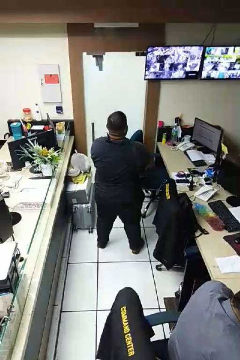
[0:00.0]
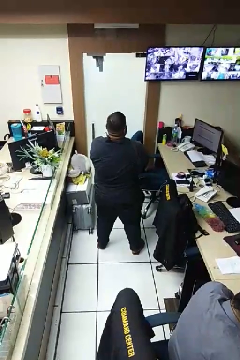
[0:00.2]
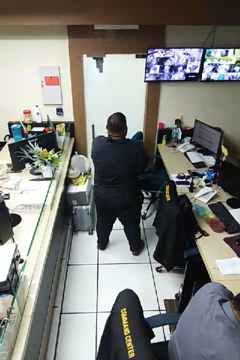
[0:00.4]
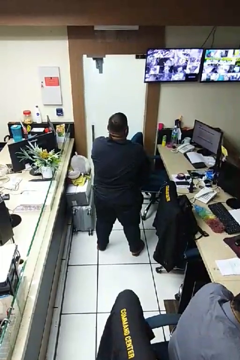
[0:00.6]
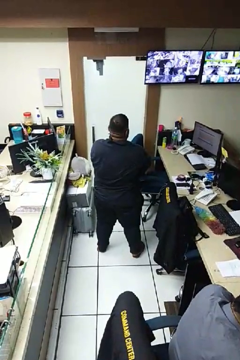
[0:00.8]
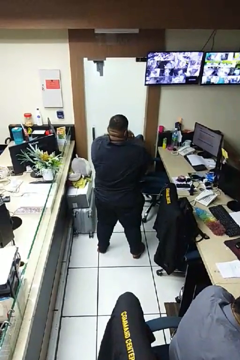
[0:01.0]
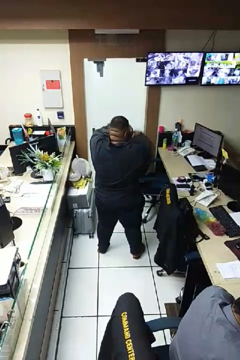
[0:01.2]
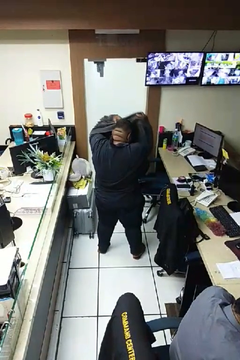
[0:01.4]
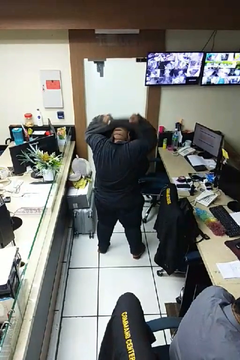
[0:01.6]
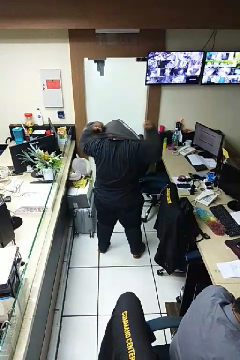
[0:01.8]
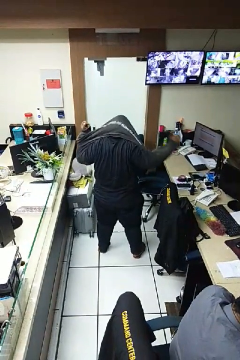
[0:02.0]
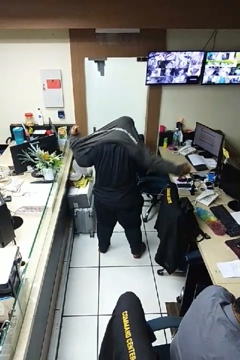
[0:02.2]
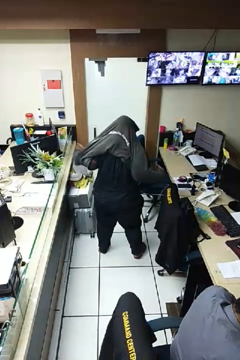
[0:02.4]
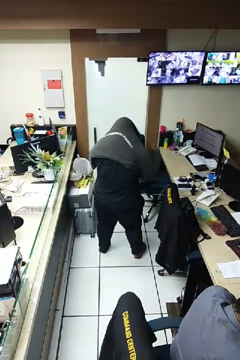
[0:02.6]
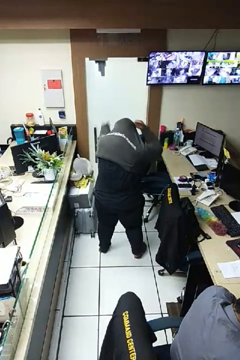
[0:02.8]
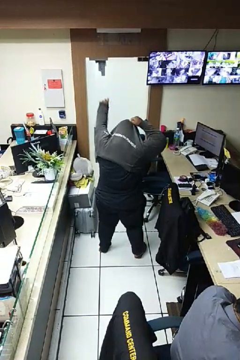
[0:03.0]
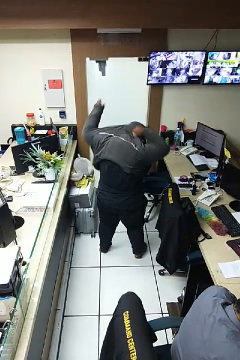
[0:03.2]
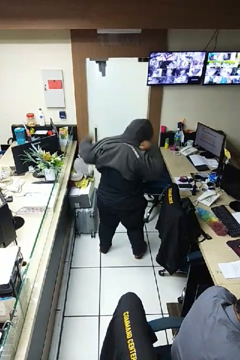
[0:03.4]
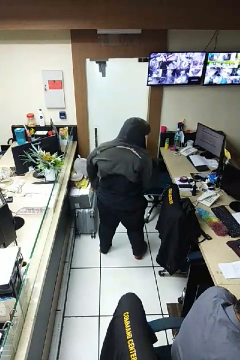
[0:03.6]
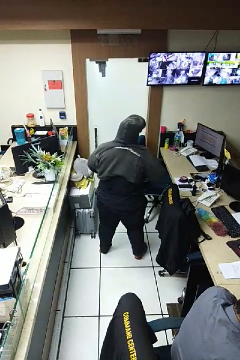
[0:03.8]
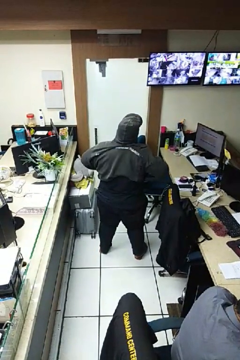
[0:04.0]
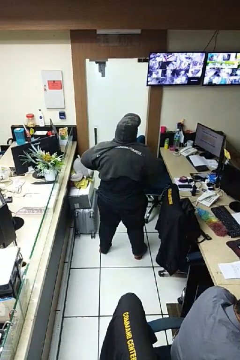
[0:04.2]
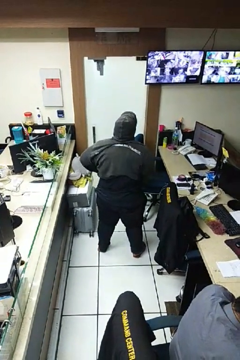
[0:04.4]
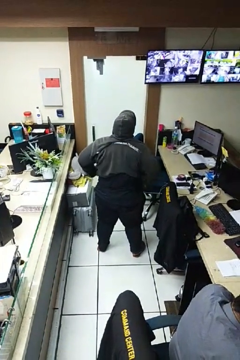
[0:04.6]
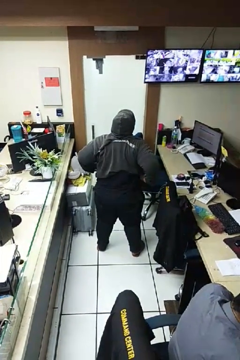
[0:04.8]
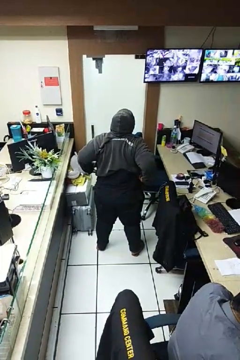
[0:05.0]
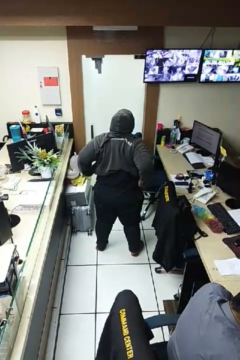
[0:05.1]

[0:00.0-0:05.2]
person puts on hoodie

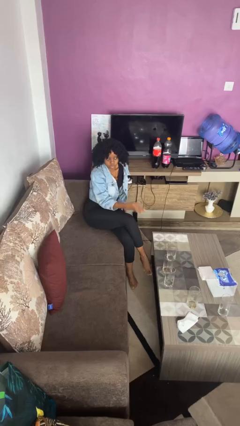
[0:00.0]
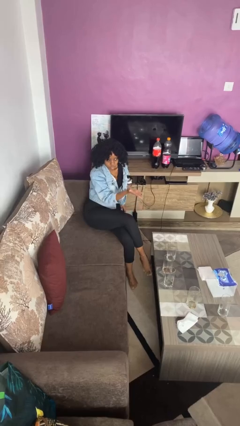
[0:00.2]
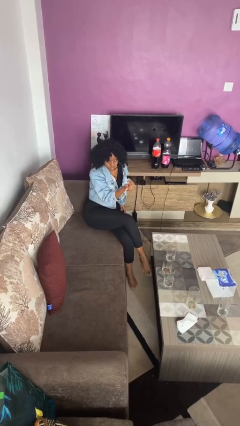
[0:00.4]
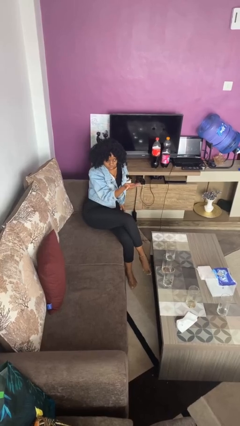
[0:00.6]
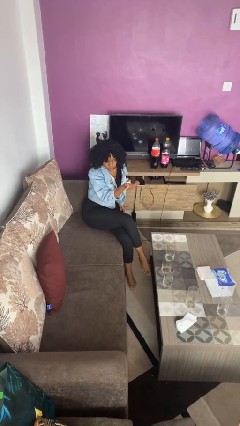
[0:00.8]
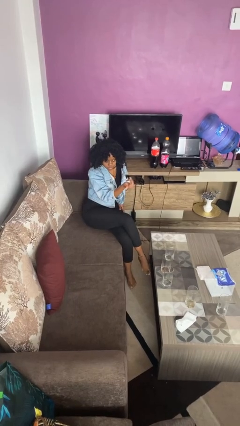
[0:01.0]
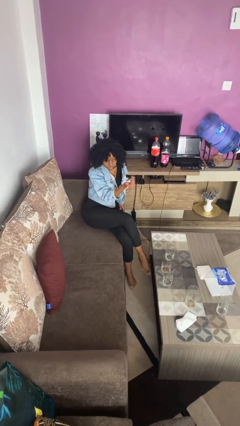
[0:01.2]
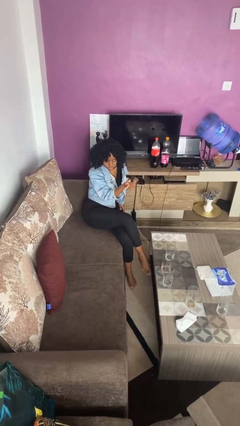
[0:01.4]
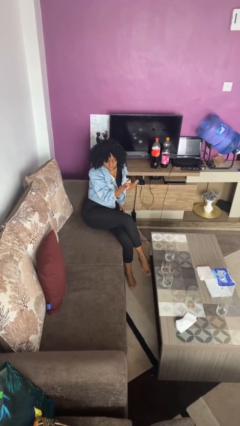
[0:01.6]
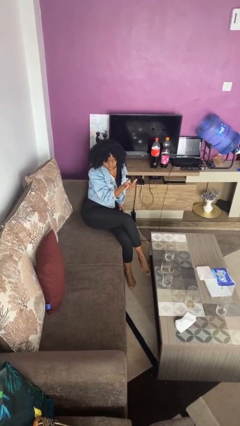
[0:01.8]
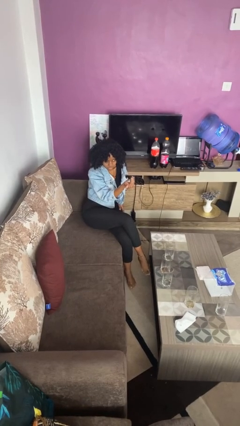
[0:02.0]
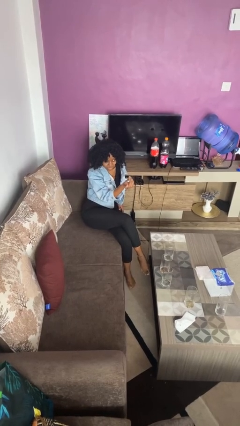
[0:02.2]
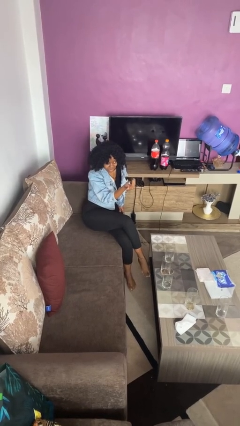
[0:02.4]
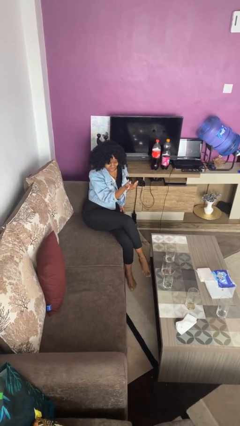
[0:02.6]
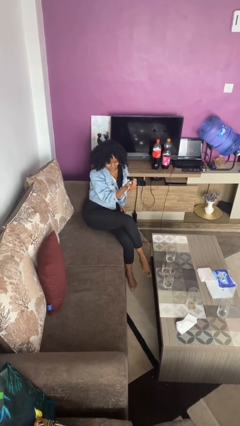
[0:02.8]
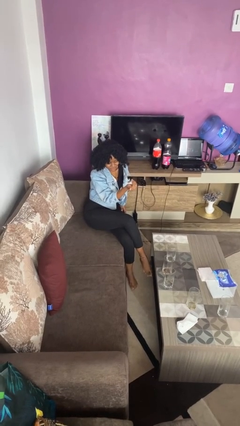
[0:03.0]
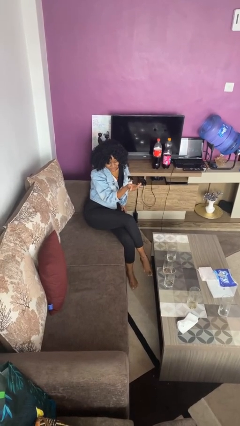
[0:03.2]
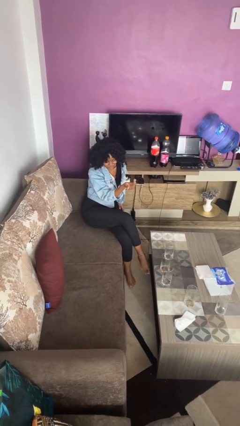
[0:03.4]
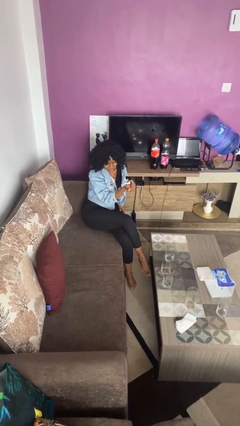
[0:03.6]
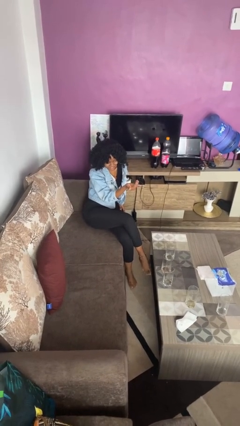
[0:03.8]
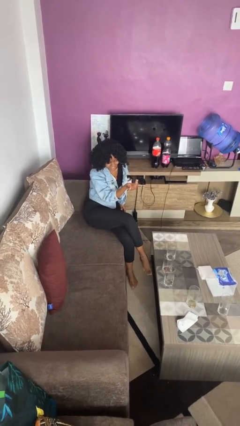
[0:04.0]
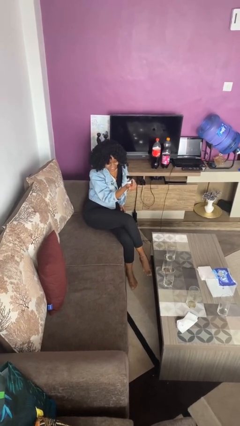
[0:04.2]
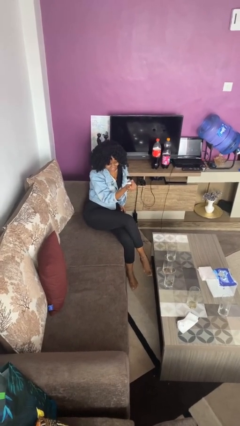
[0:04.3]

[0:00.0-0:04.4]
person gestures come here

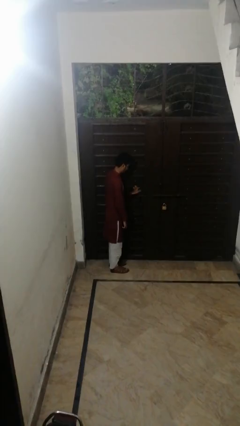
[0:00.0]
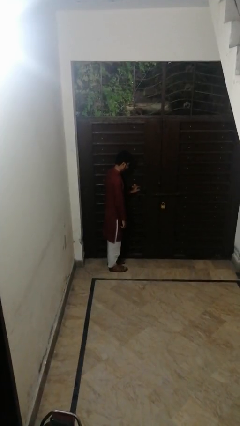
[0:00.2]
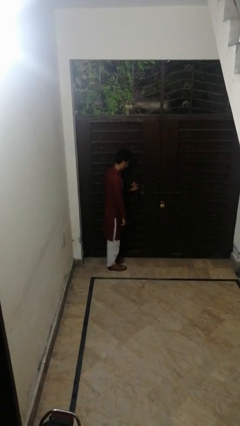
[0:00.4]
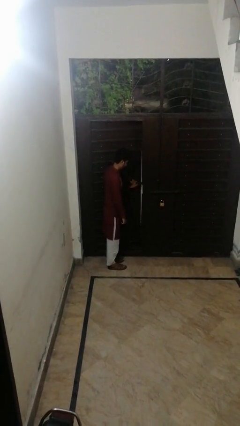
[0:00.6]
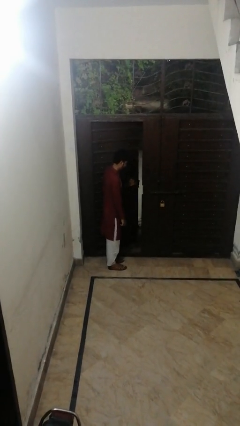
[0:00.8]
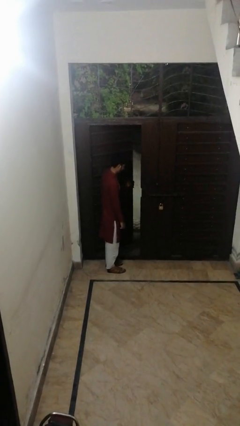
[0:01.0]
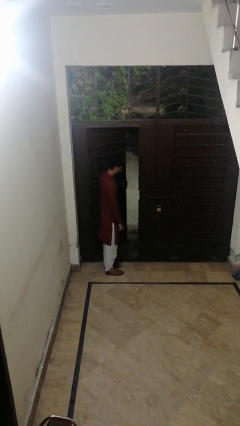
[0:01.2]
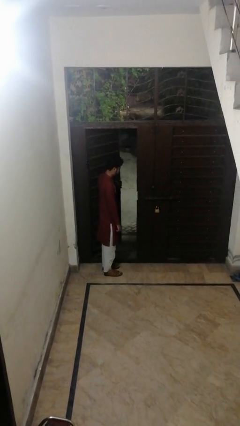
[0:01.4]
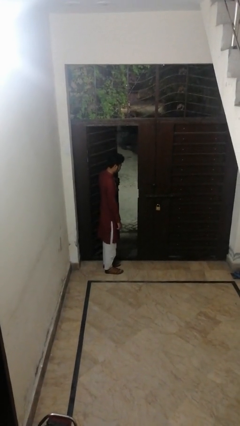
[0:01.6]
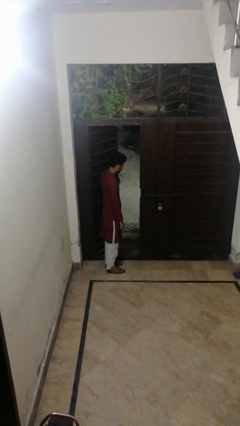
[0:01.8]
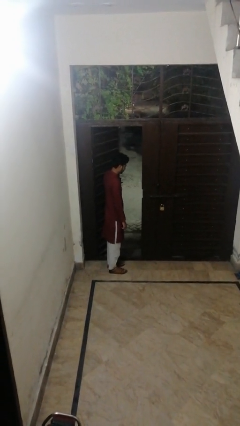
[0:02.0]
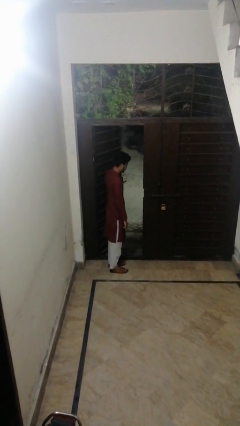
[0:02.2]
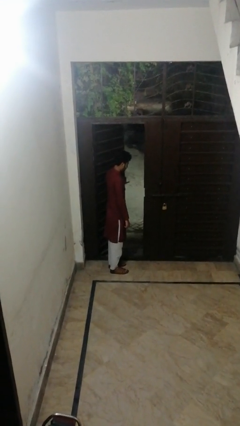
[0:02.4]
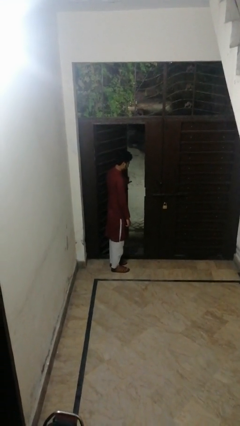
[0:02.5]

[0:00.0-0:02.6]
person opens facility door

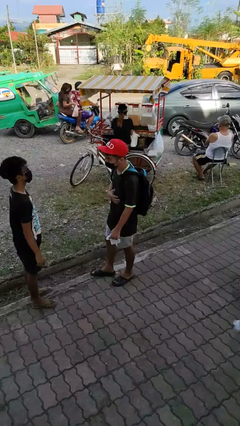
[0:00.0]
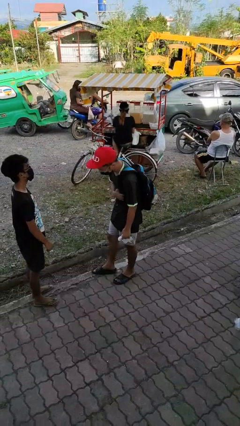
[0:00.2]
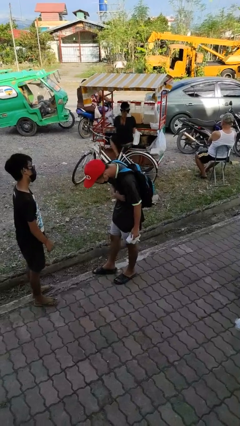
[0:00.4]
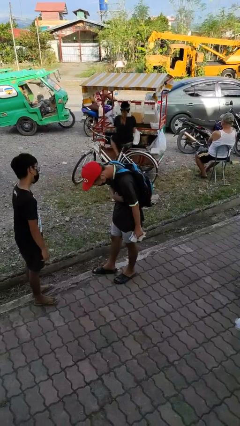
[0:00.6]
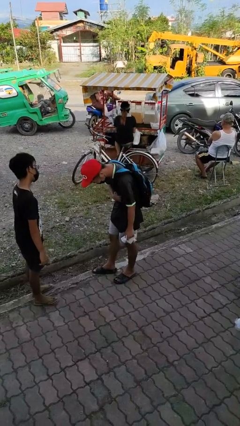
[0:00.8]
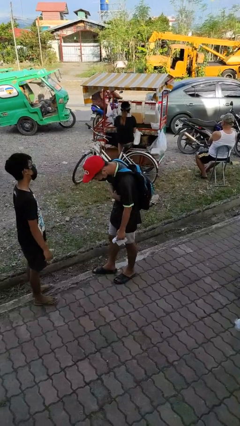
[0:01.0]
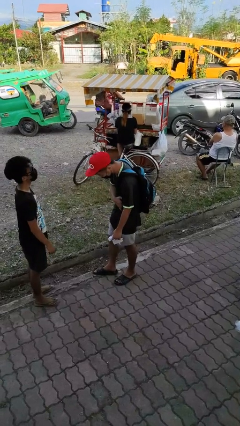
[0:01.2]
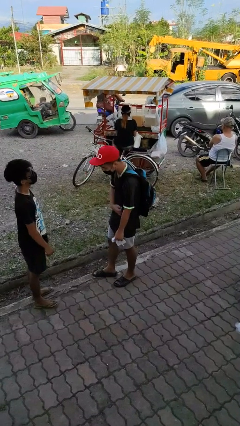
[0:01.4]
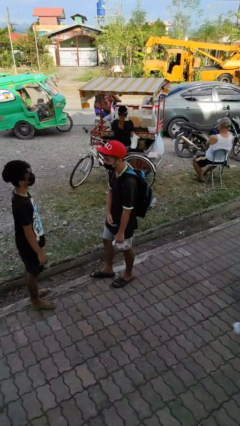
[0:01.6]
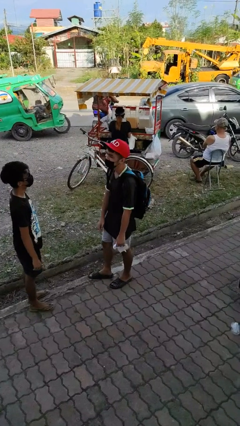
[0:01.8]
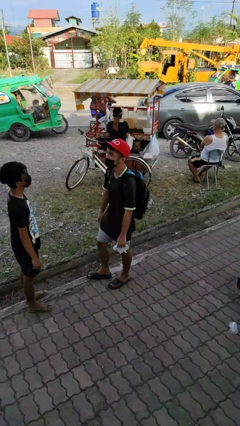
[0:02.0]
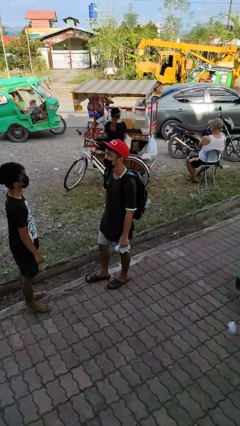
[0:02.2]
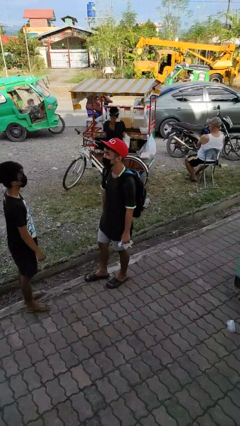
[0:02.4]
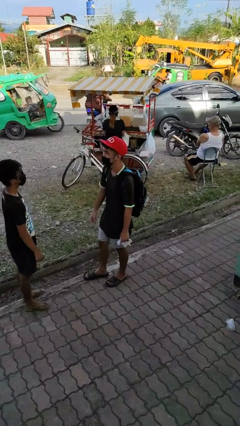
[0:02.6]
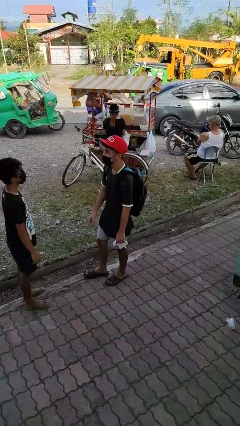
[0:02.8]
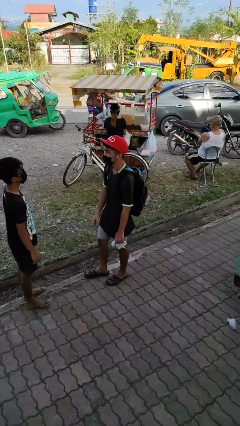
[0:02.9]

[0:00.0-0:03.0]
person laughs with person

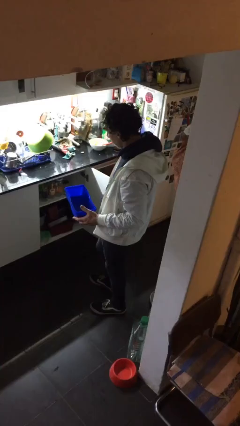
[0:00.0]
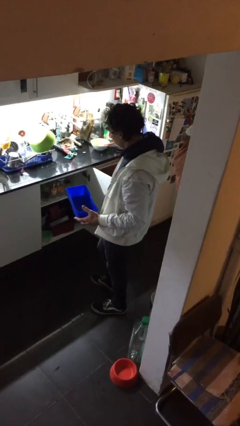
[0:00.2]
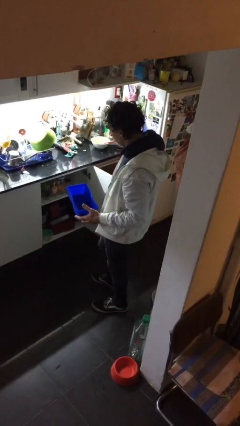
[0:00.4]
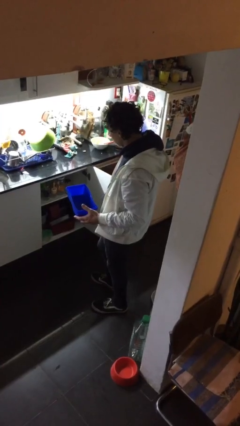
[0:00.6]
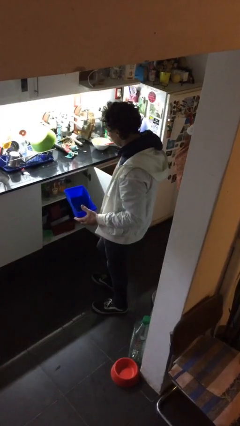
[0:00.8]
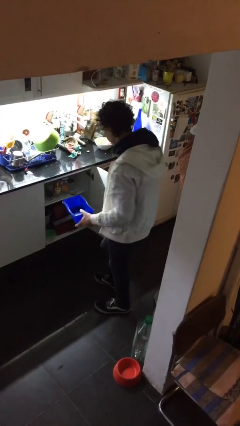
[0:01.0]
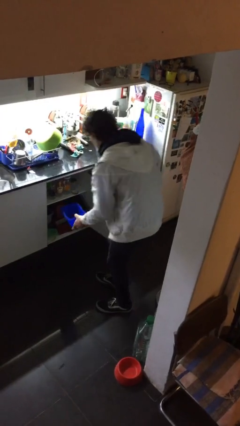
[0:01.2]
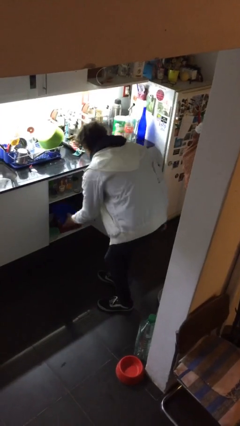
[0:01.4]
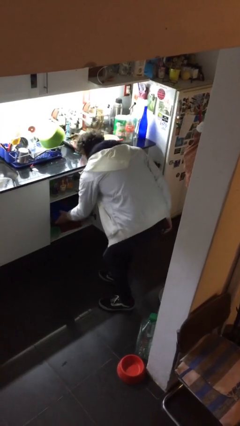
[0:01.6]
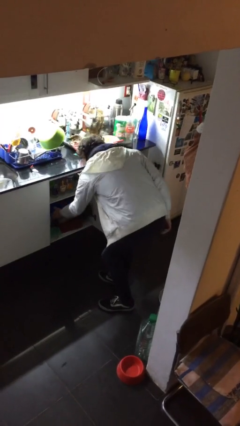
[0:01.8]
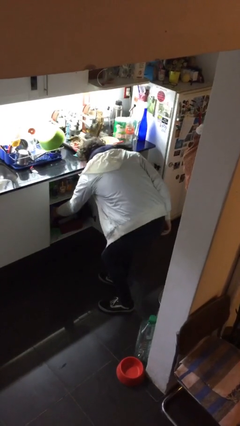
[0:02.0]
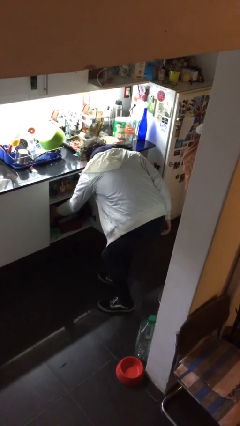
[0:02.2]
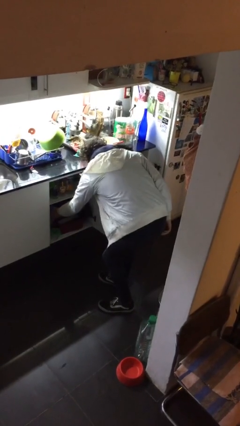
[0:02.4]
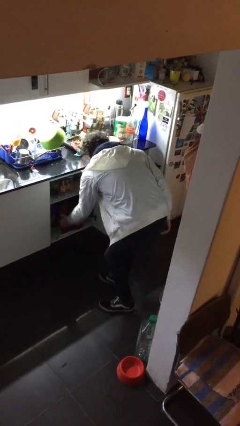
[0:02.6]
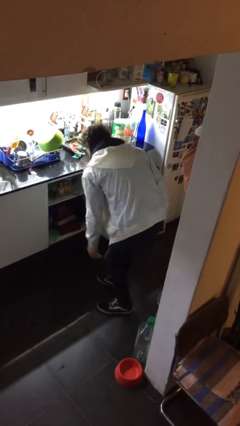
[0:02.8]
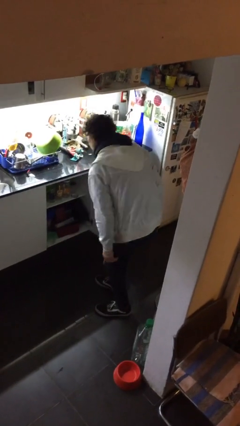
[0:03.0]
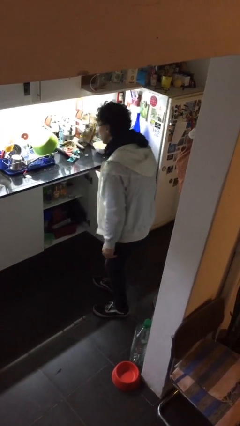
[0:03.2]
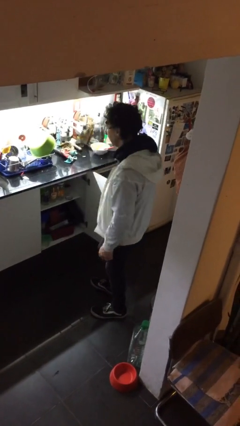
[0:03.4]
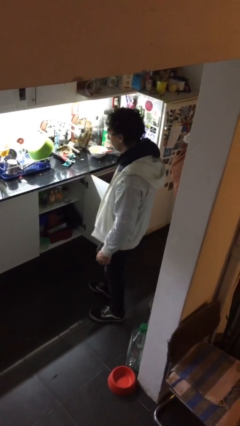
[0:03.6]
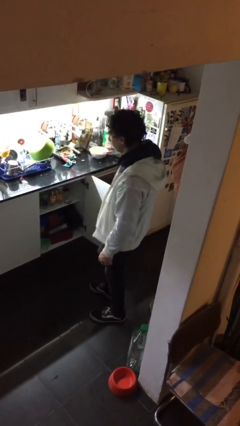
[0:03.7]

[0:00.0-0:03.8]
person puts down object into cabinet
